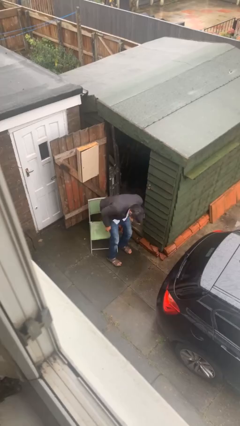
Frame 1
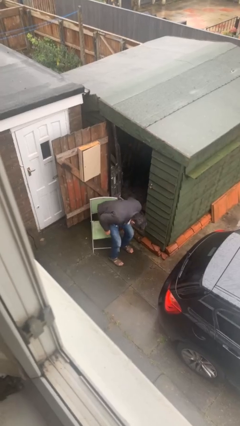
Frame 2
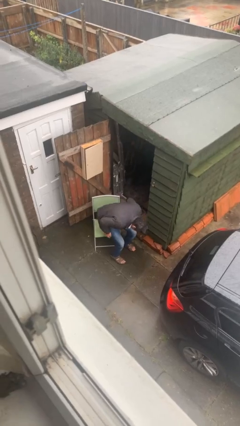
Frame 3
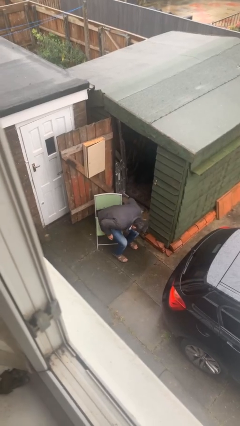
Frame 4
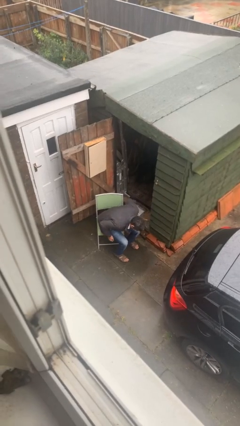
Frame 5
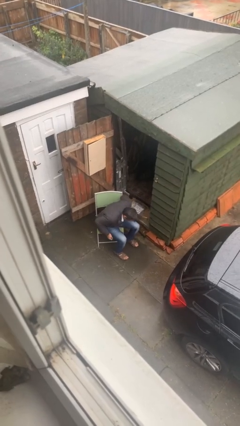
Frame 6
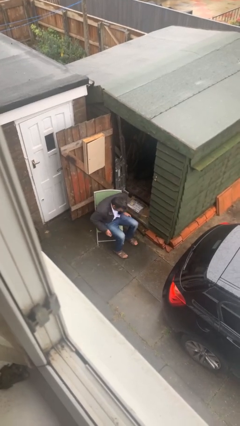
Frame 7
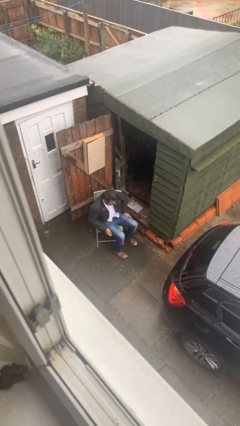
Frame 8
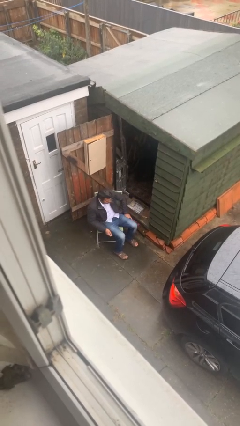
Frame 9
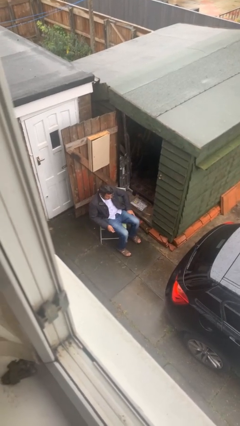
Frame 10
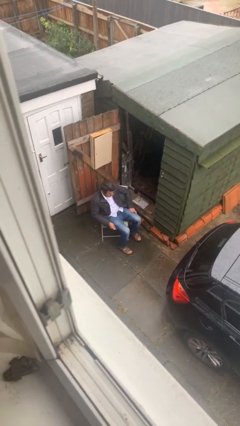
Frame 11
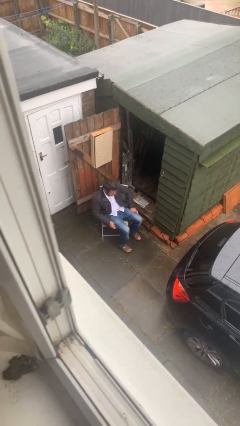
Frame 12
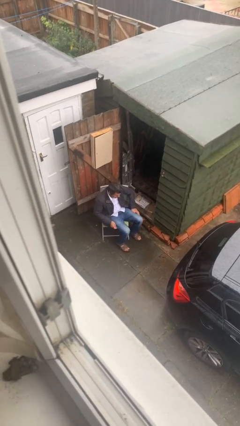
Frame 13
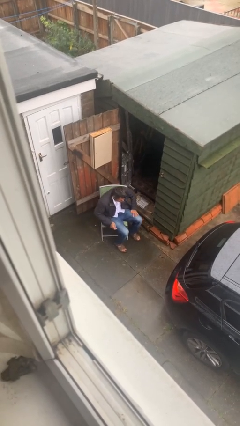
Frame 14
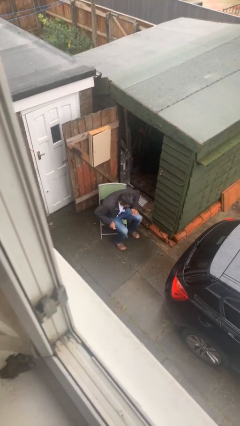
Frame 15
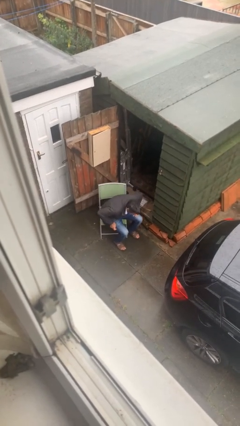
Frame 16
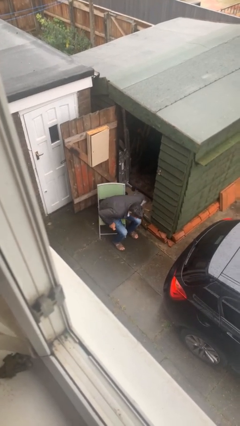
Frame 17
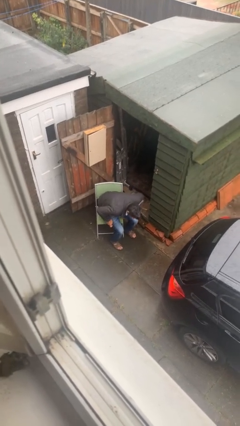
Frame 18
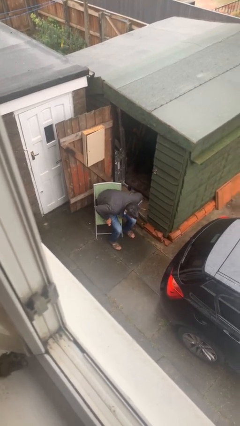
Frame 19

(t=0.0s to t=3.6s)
person sits down

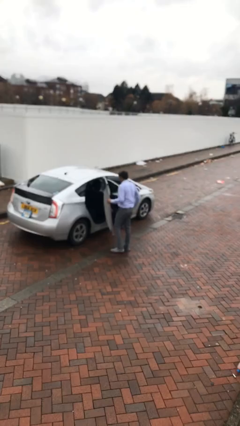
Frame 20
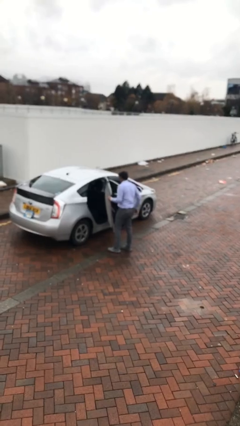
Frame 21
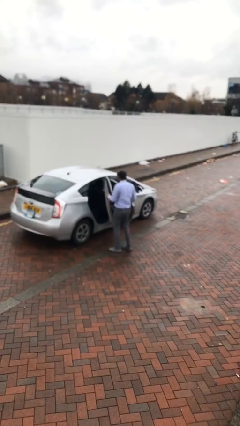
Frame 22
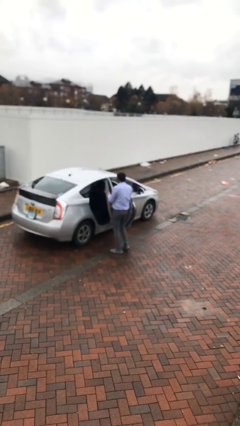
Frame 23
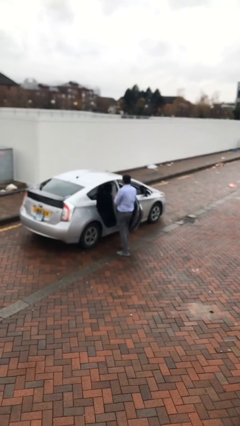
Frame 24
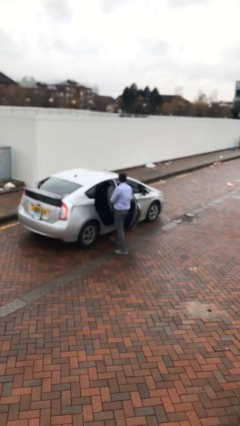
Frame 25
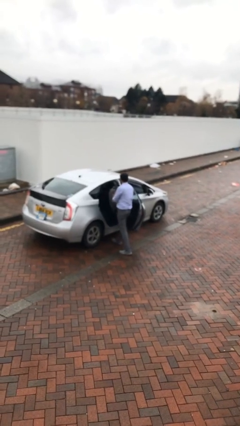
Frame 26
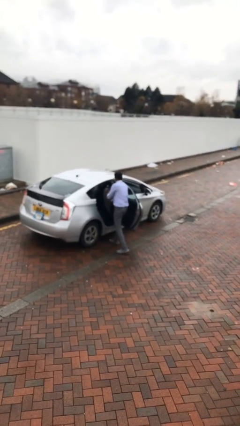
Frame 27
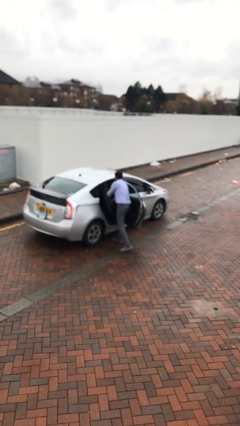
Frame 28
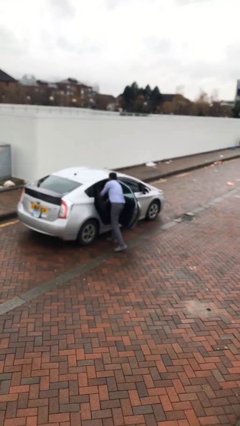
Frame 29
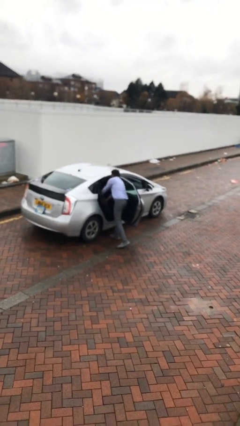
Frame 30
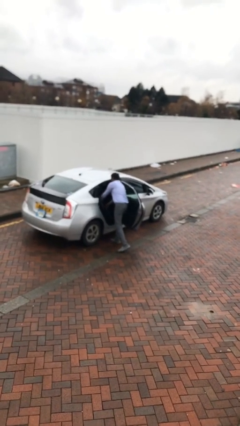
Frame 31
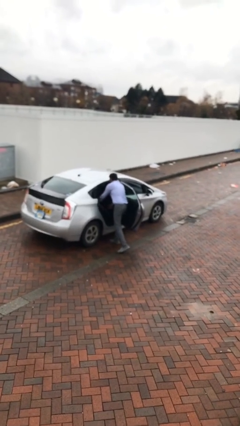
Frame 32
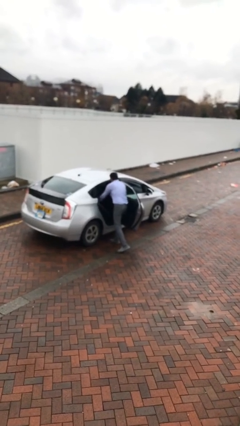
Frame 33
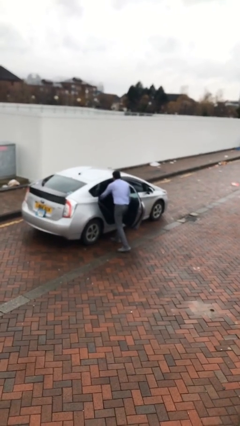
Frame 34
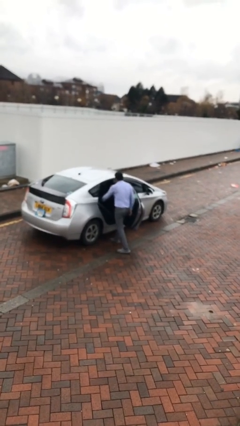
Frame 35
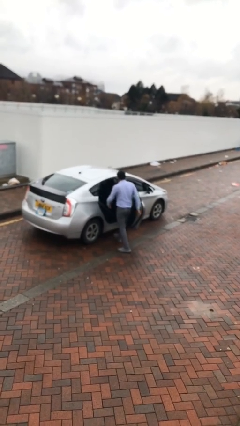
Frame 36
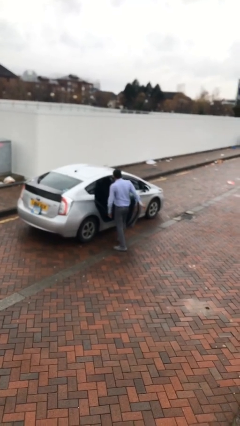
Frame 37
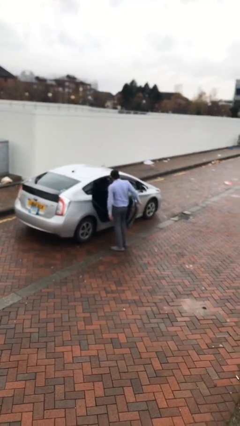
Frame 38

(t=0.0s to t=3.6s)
person loads car

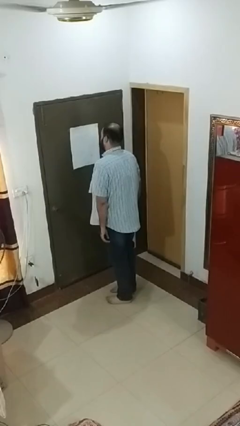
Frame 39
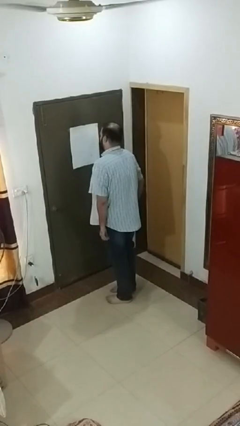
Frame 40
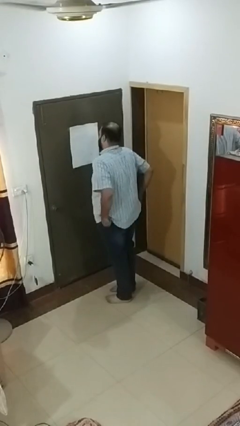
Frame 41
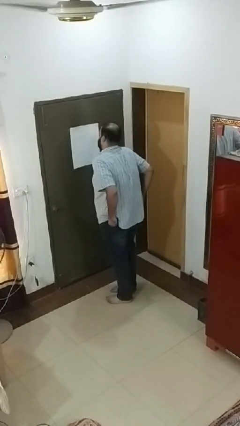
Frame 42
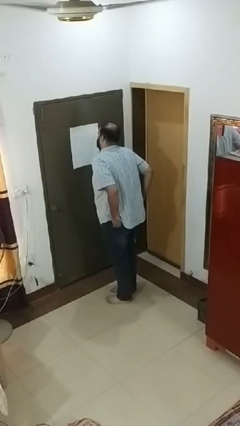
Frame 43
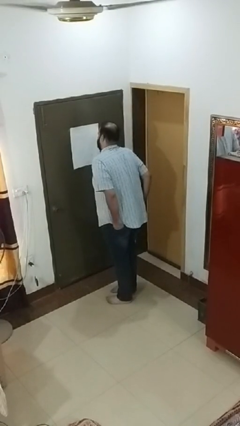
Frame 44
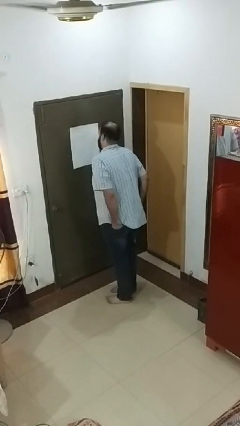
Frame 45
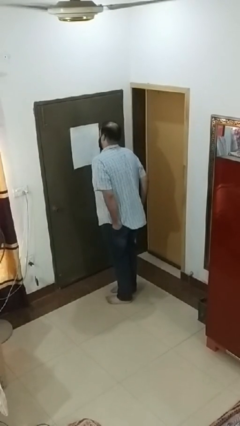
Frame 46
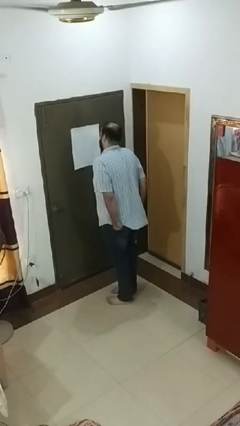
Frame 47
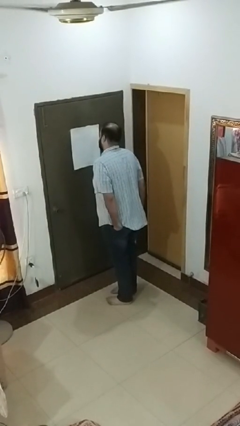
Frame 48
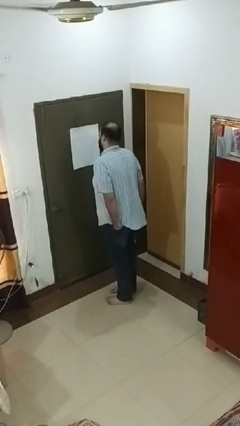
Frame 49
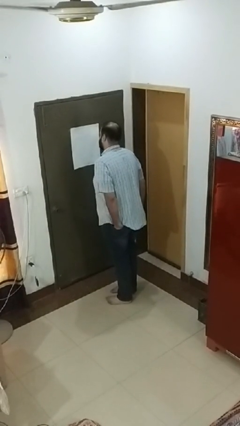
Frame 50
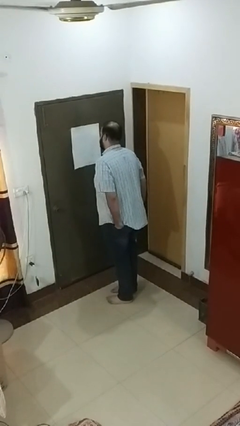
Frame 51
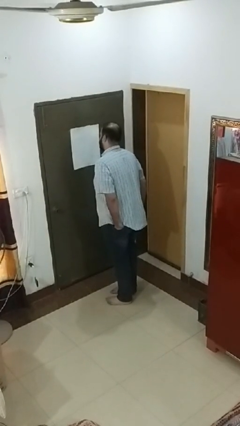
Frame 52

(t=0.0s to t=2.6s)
person puts hands in back pockets

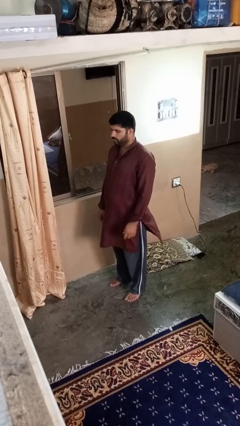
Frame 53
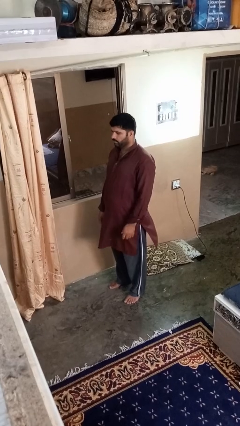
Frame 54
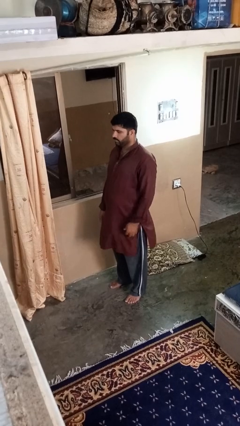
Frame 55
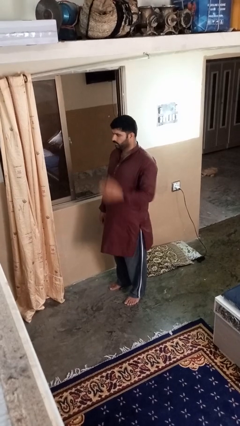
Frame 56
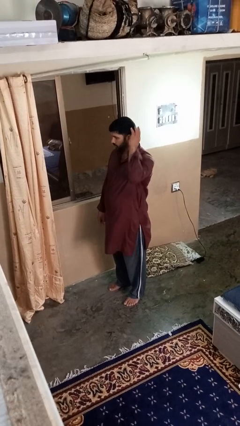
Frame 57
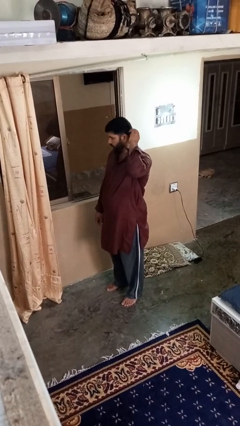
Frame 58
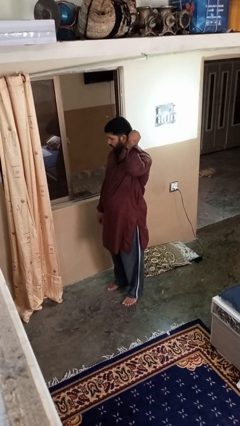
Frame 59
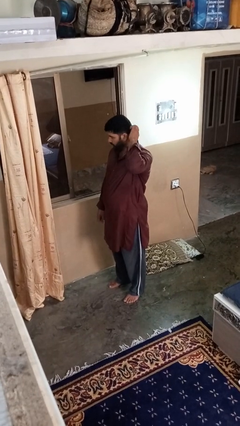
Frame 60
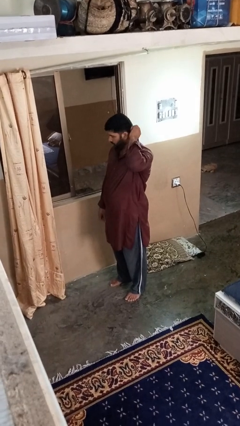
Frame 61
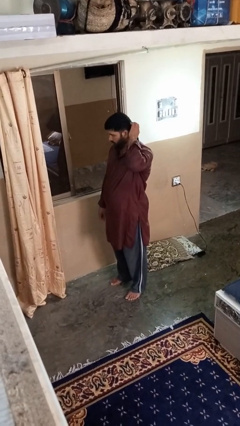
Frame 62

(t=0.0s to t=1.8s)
person strokes hair

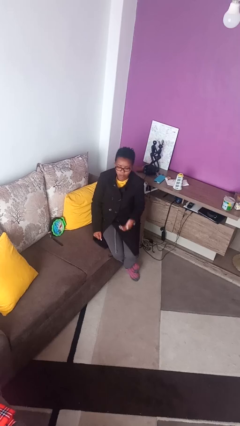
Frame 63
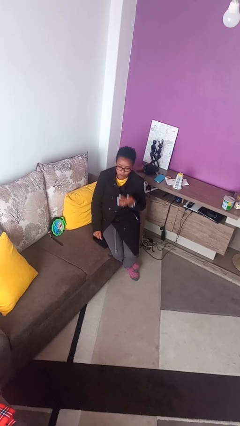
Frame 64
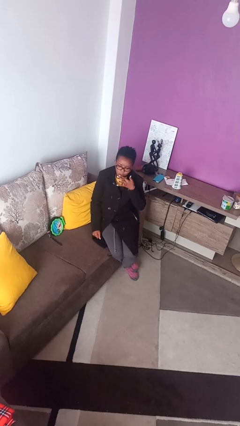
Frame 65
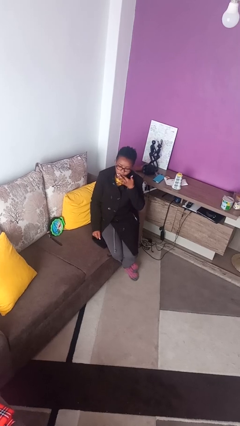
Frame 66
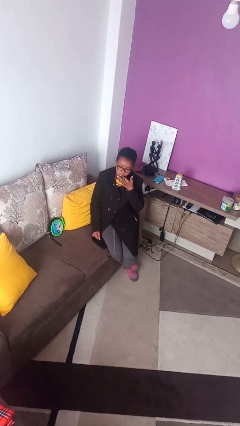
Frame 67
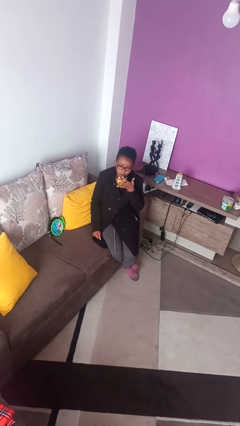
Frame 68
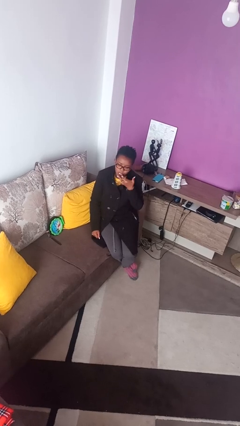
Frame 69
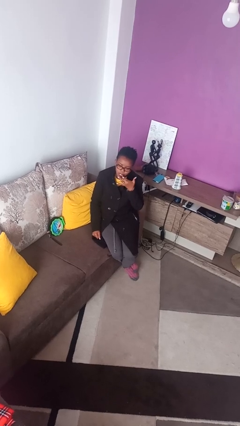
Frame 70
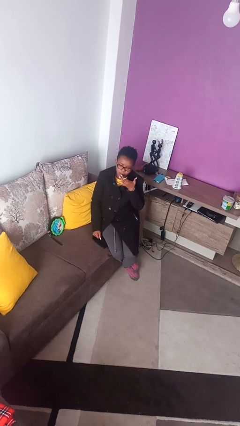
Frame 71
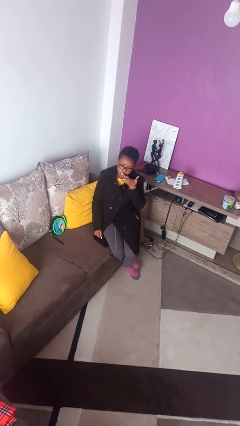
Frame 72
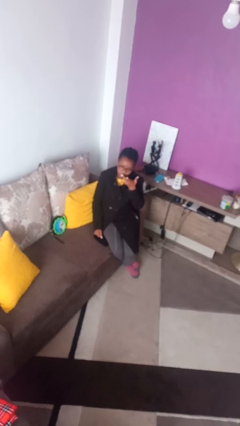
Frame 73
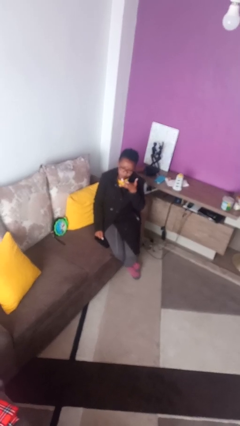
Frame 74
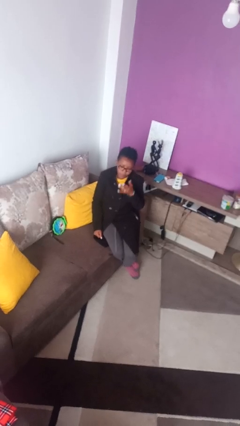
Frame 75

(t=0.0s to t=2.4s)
person licks fingers

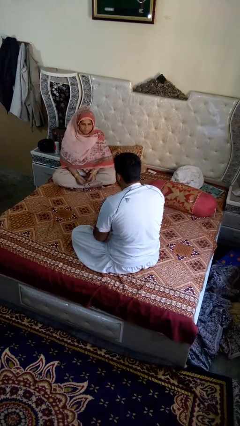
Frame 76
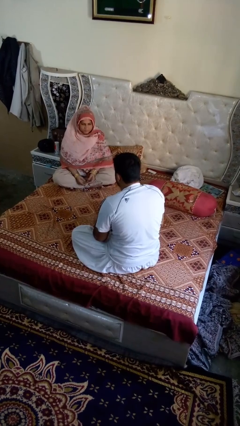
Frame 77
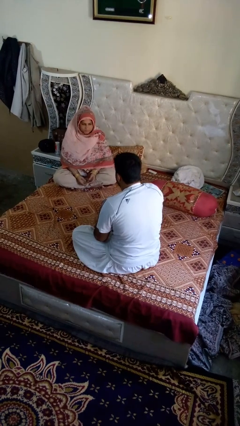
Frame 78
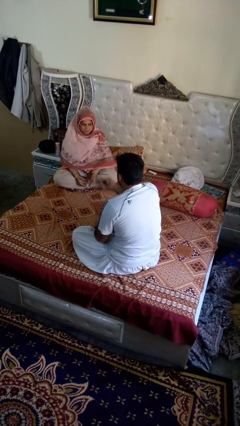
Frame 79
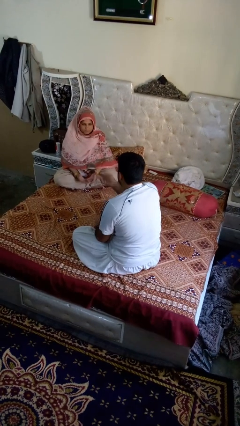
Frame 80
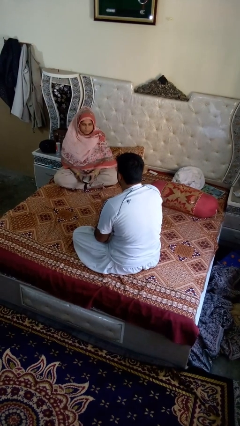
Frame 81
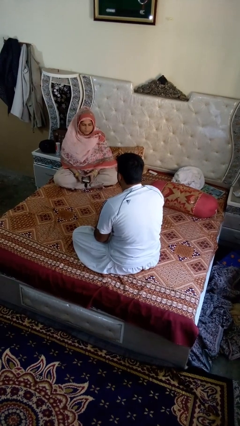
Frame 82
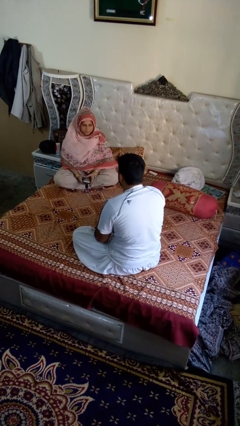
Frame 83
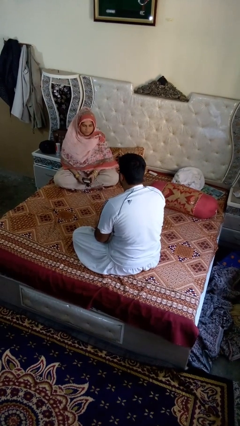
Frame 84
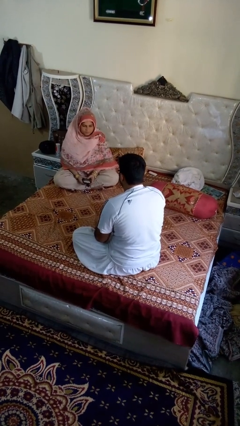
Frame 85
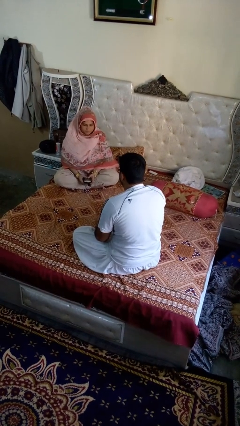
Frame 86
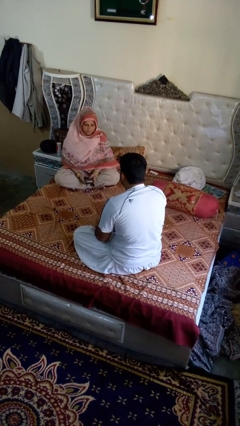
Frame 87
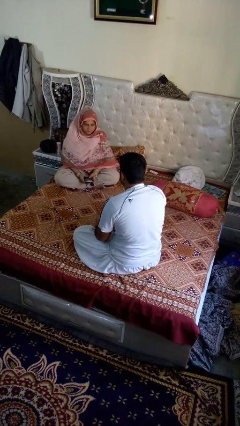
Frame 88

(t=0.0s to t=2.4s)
person throws object to person

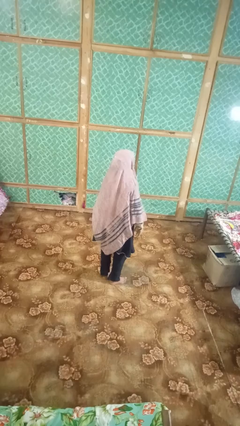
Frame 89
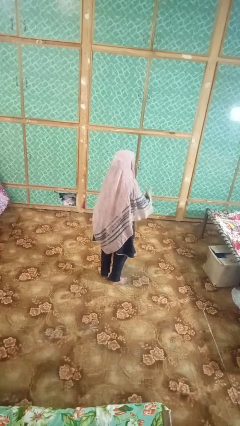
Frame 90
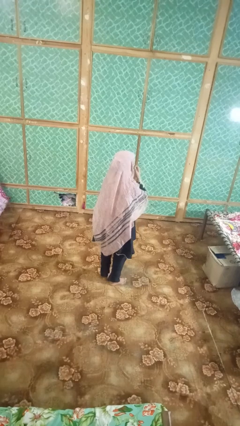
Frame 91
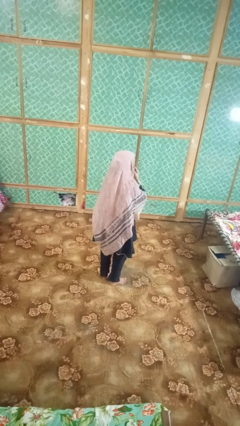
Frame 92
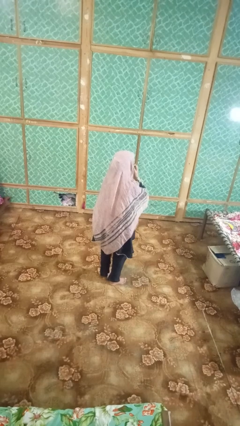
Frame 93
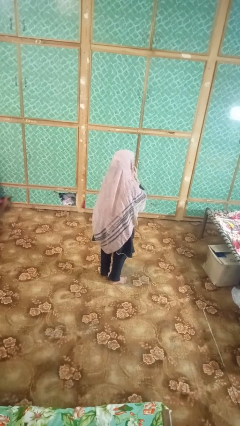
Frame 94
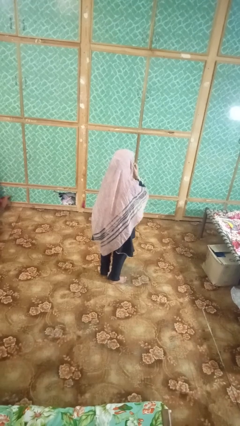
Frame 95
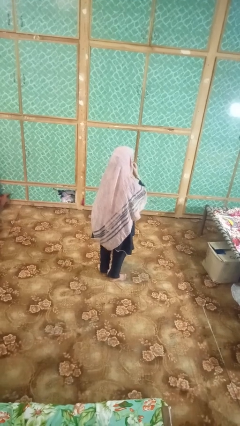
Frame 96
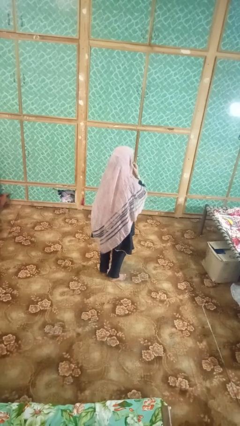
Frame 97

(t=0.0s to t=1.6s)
person strokes chin
